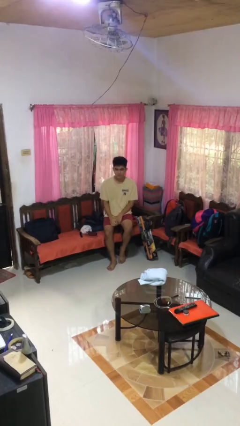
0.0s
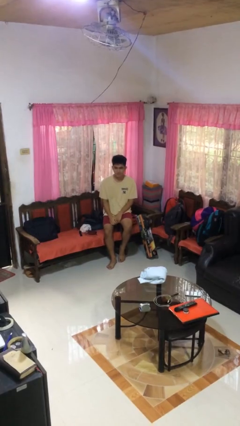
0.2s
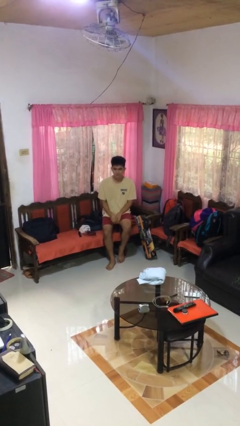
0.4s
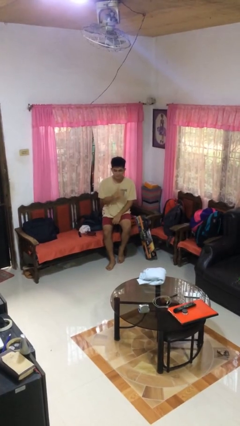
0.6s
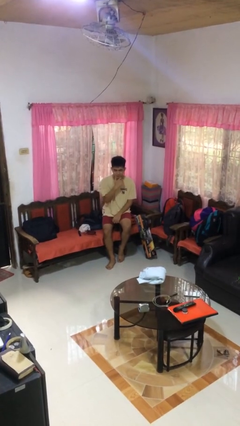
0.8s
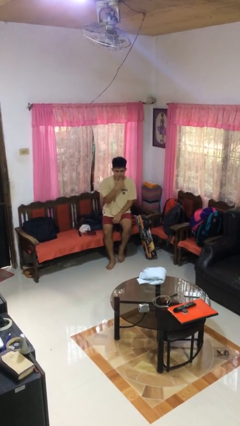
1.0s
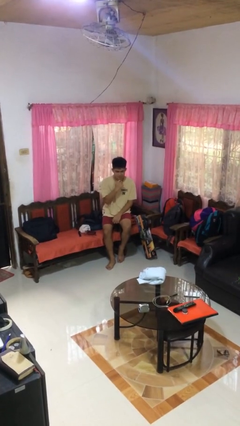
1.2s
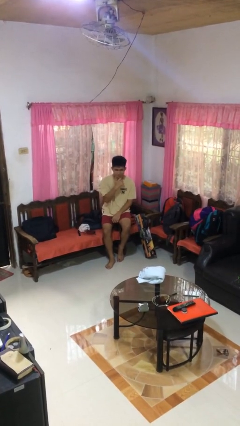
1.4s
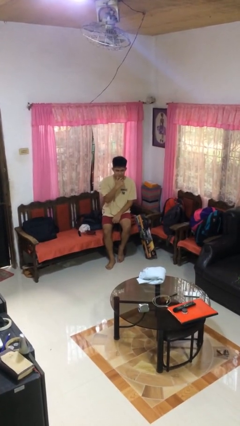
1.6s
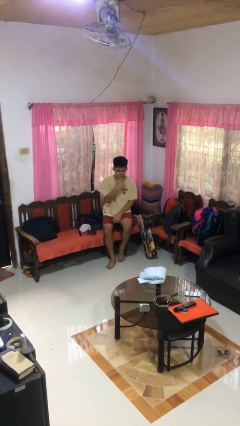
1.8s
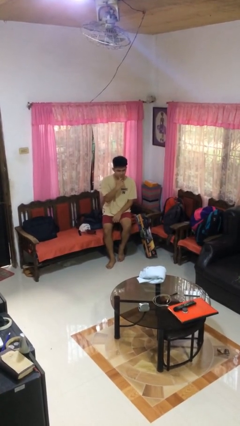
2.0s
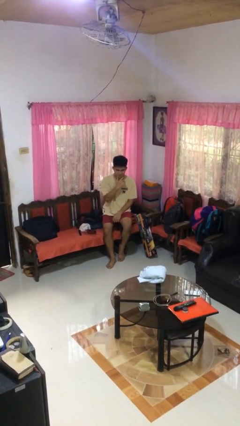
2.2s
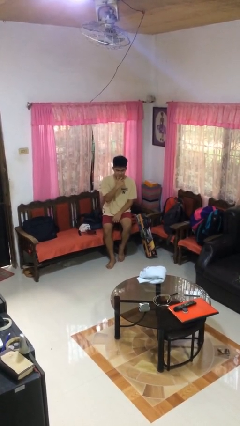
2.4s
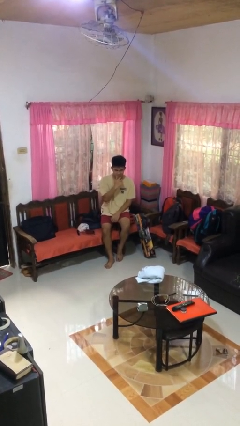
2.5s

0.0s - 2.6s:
person strokes chin

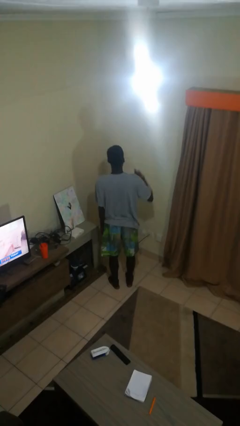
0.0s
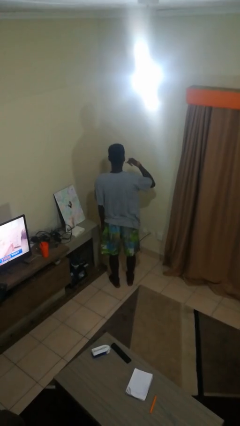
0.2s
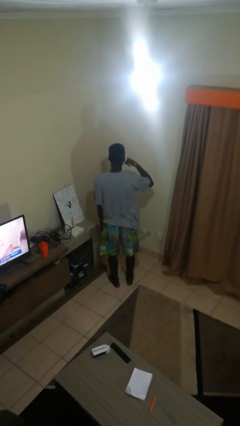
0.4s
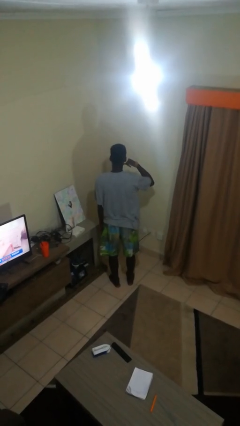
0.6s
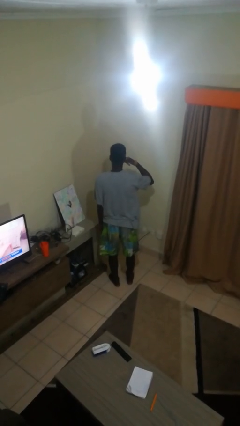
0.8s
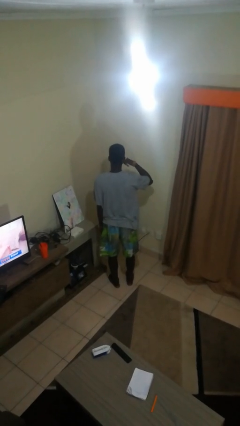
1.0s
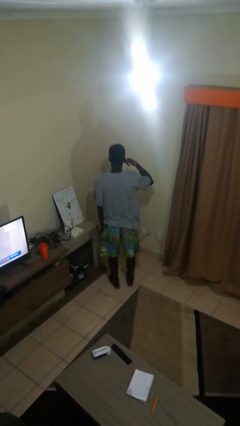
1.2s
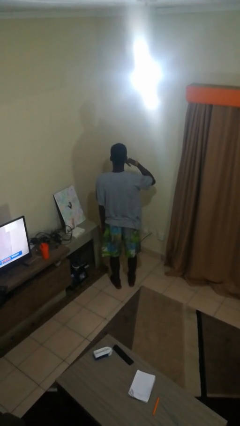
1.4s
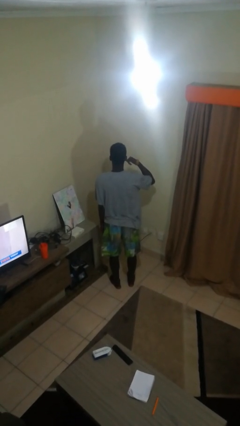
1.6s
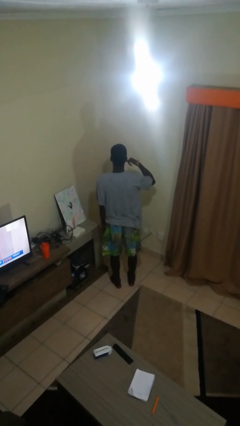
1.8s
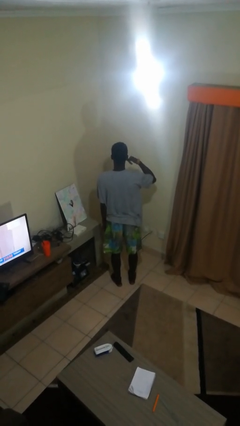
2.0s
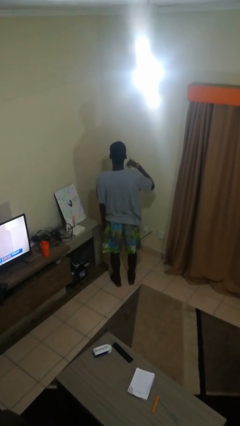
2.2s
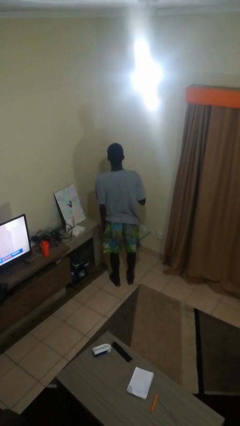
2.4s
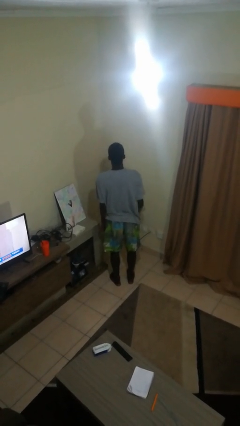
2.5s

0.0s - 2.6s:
person gestures call me

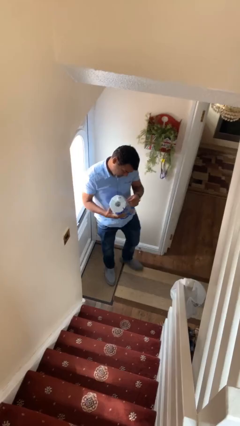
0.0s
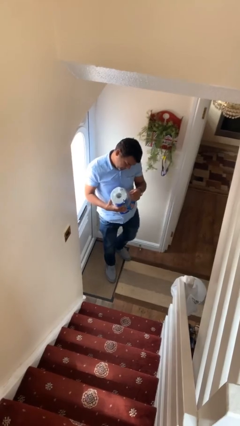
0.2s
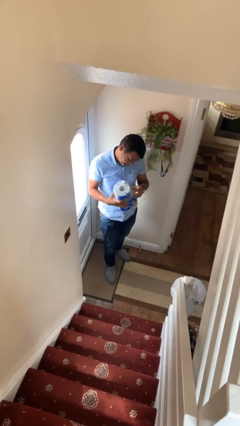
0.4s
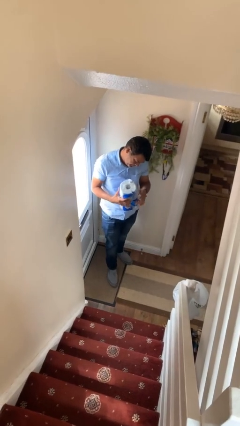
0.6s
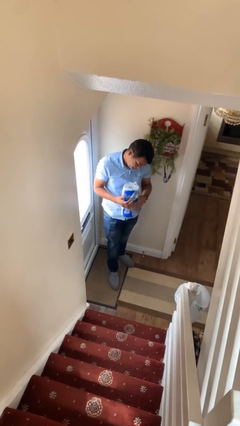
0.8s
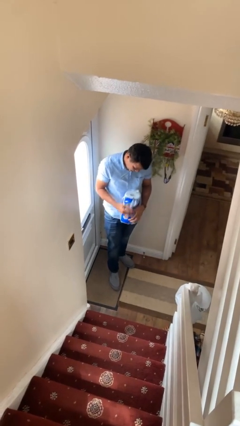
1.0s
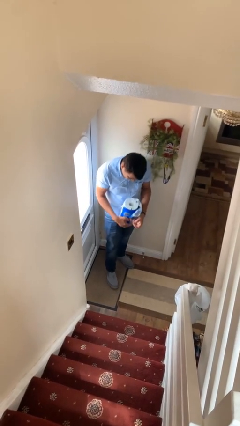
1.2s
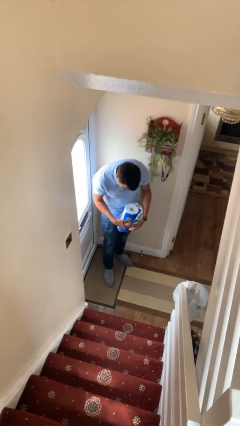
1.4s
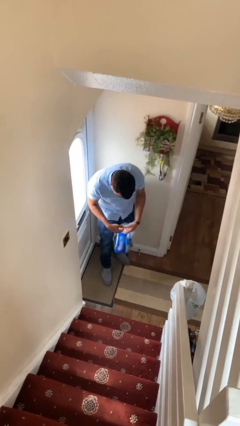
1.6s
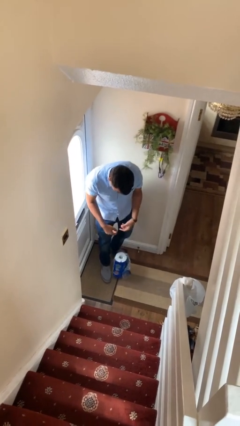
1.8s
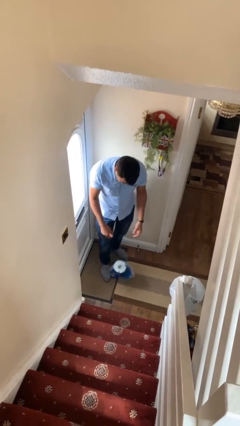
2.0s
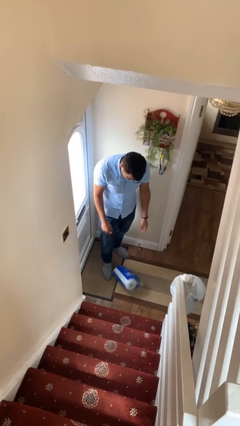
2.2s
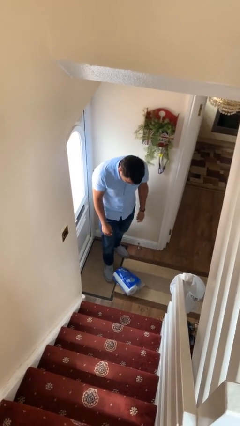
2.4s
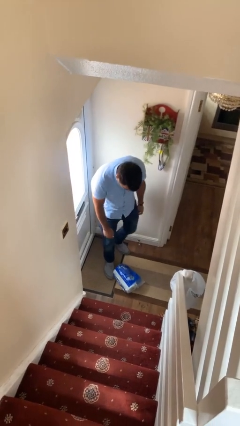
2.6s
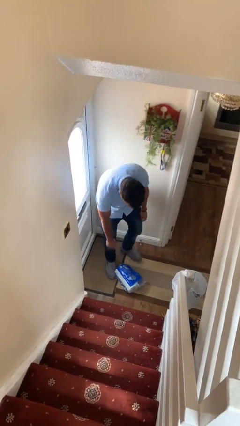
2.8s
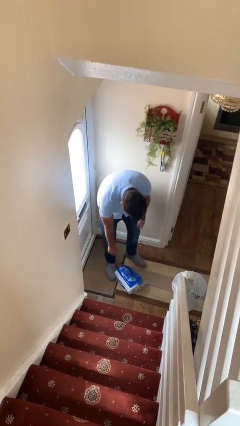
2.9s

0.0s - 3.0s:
person drops object

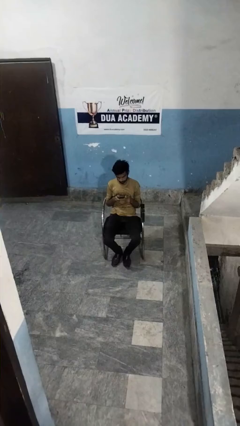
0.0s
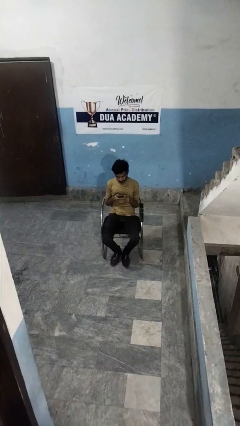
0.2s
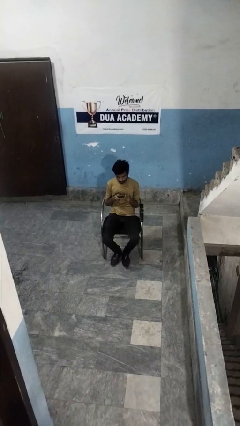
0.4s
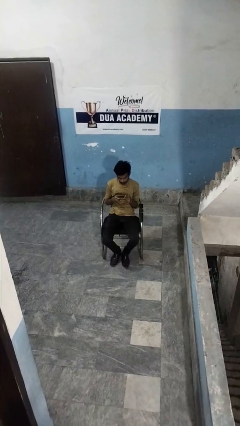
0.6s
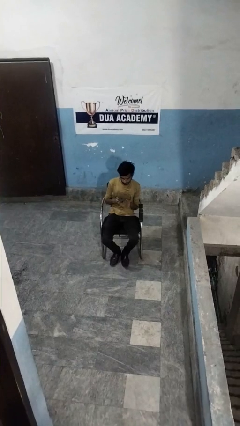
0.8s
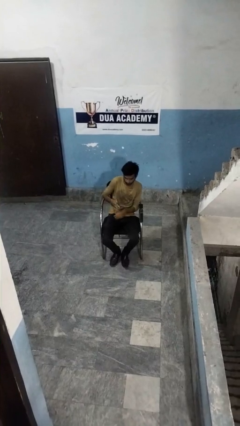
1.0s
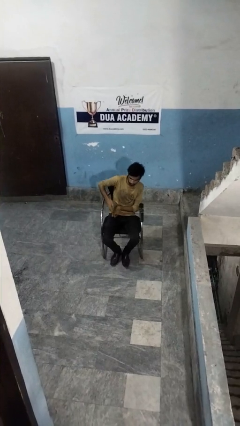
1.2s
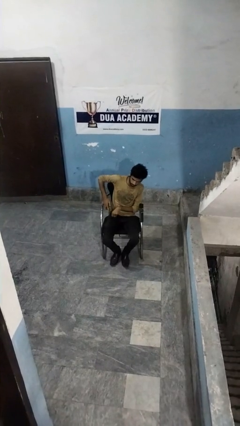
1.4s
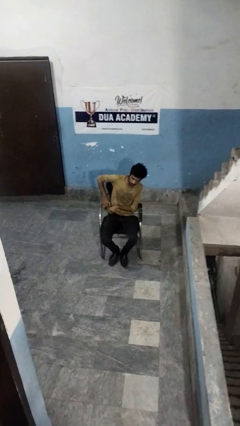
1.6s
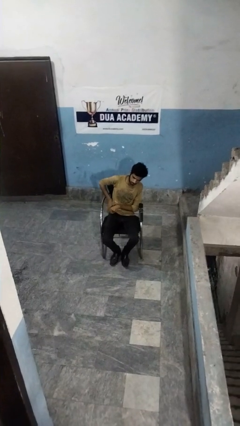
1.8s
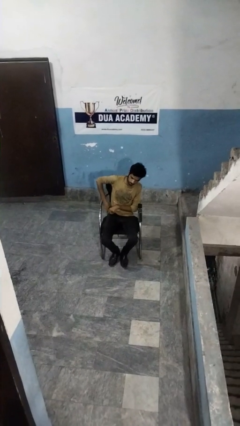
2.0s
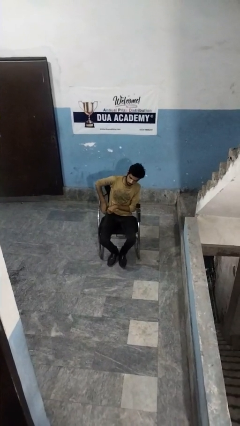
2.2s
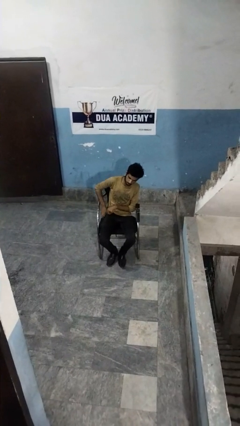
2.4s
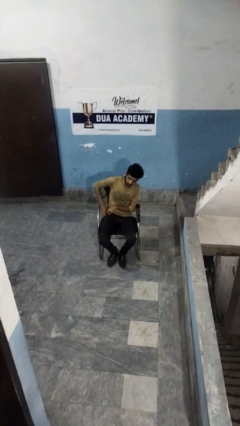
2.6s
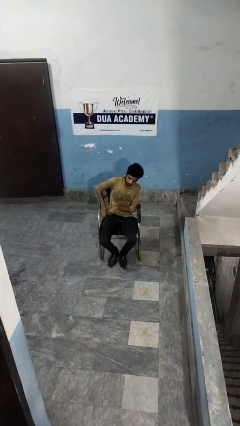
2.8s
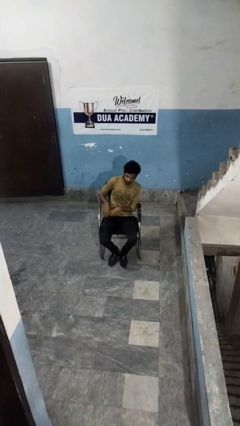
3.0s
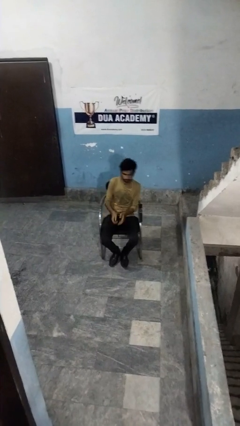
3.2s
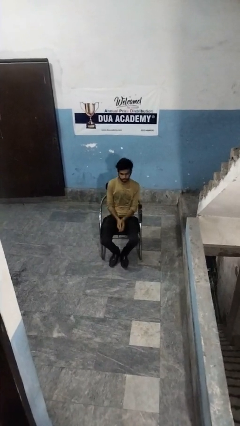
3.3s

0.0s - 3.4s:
person puts phone into pocket

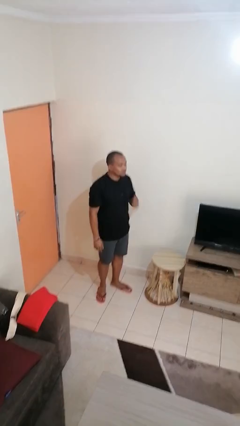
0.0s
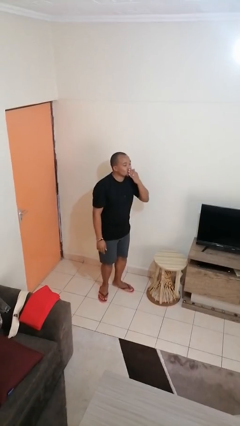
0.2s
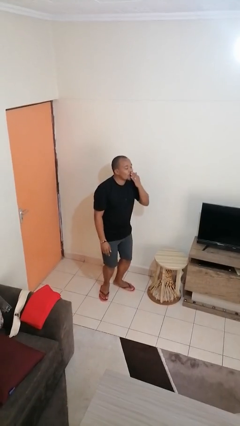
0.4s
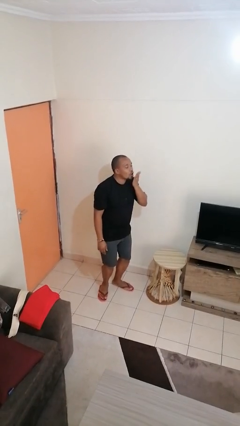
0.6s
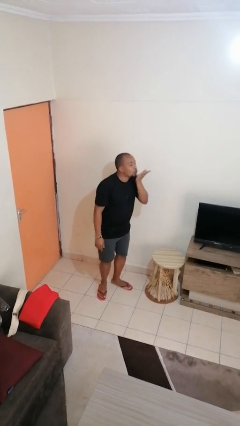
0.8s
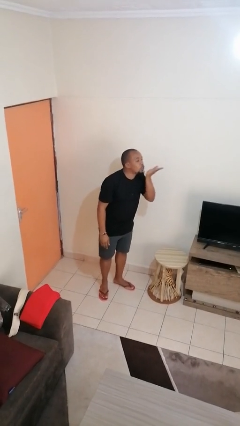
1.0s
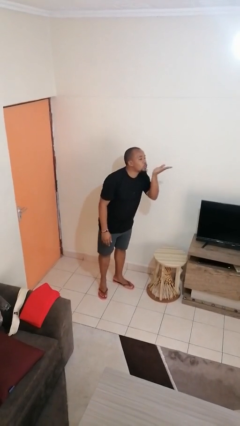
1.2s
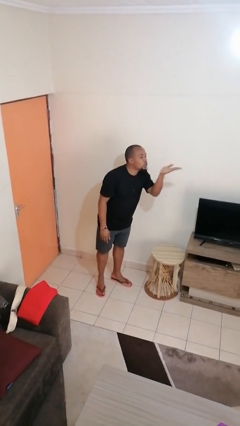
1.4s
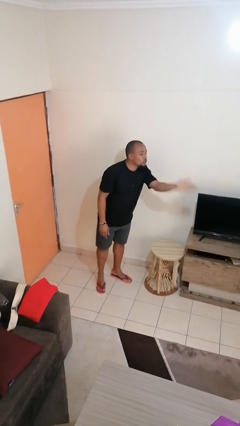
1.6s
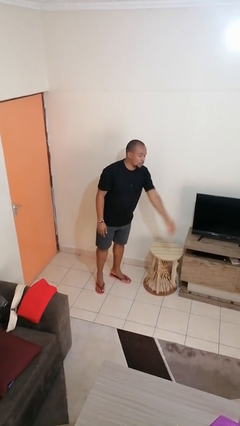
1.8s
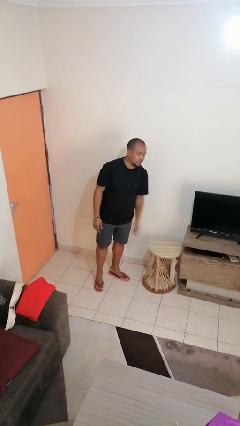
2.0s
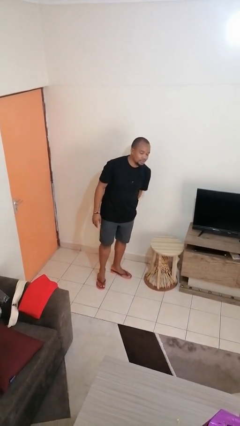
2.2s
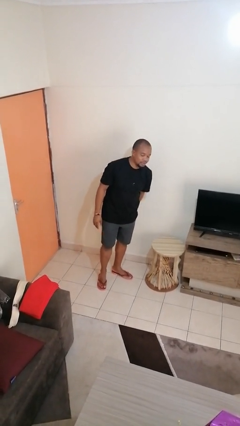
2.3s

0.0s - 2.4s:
person gestures blow kiss

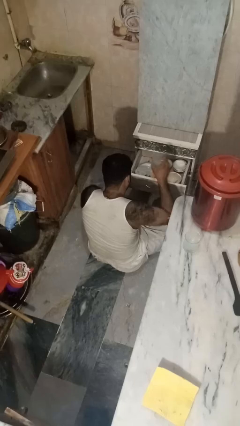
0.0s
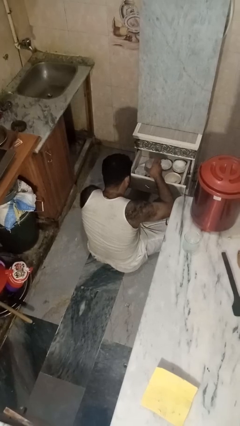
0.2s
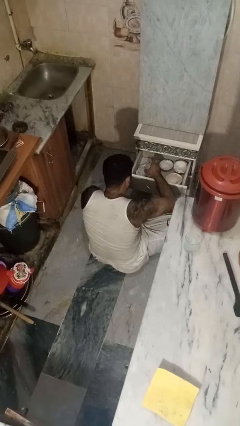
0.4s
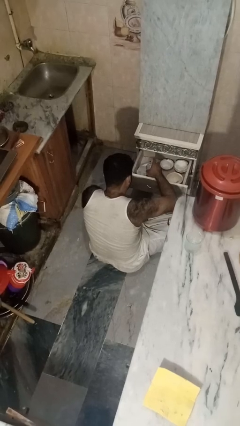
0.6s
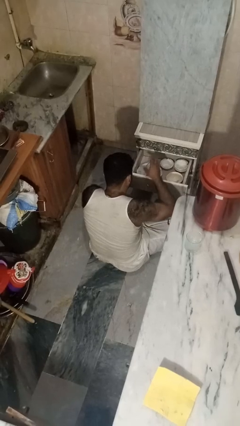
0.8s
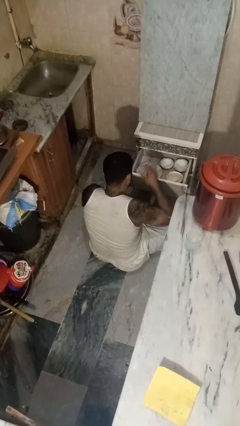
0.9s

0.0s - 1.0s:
person puts object into kitchen drawer

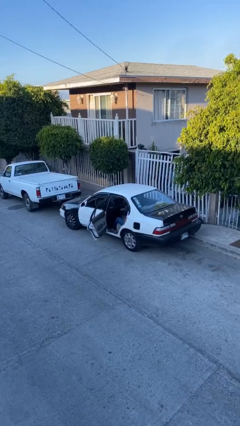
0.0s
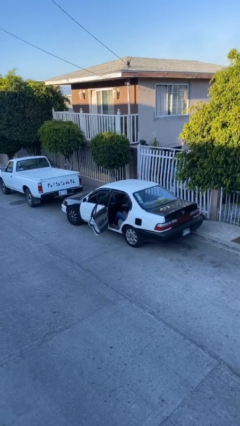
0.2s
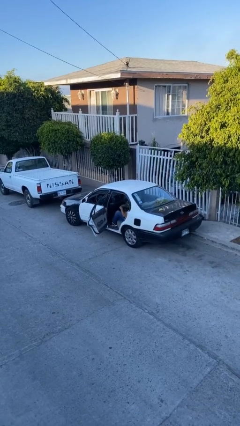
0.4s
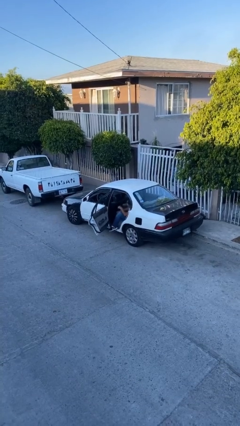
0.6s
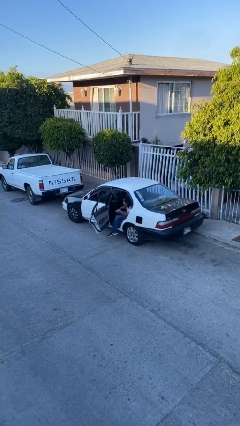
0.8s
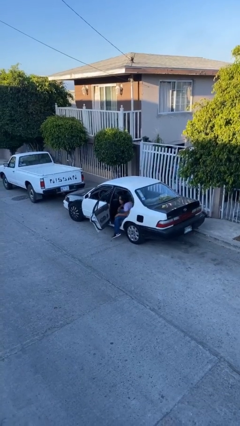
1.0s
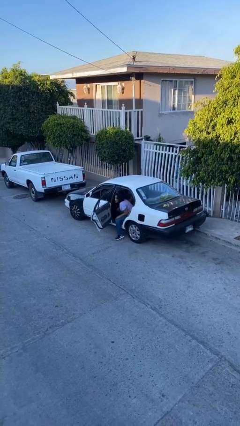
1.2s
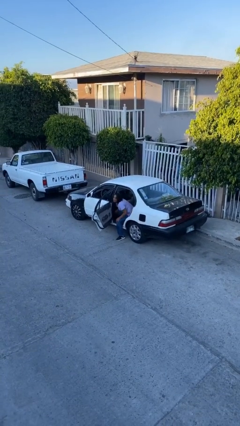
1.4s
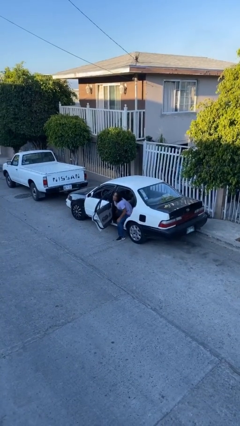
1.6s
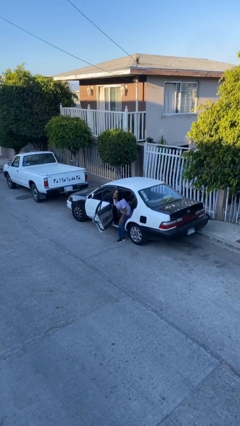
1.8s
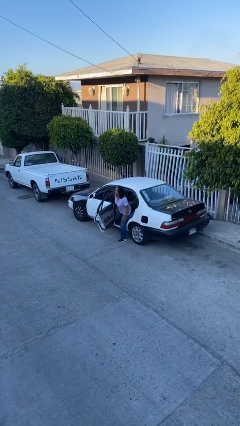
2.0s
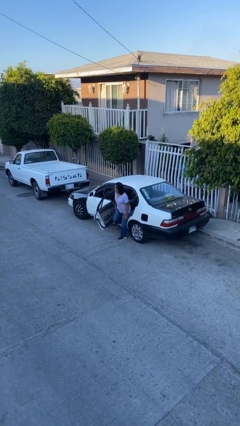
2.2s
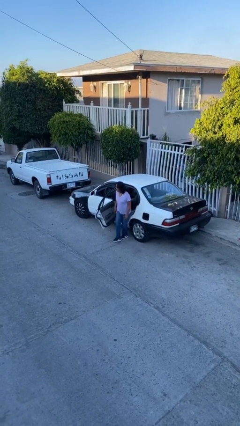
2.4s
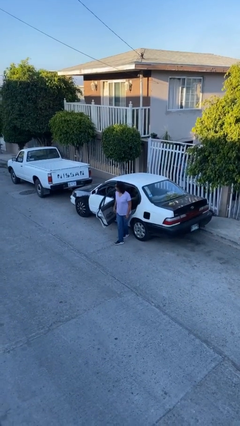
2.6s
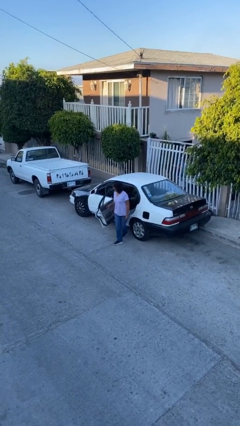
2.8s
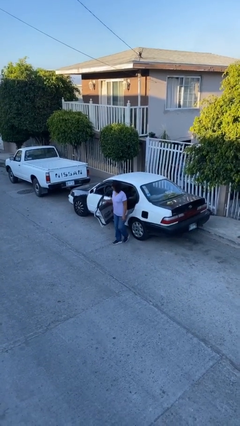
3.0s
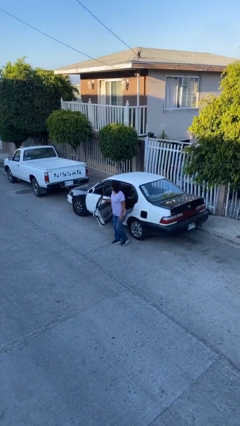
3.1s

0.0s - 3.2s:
person exits car
